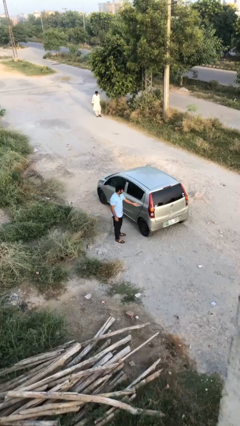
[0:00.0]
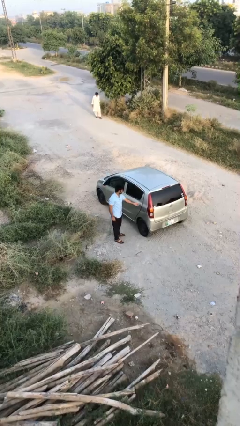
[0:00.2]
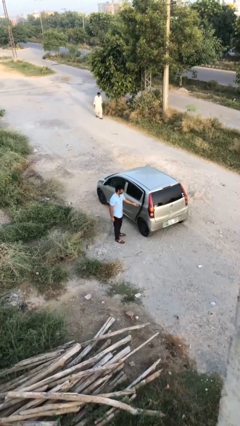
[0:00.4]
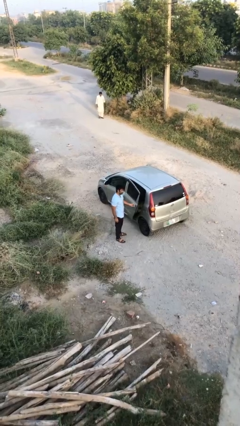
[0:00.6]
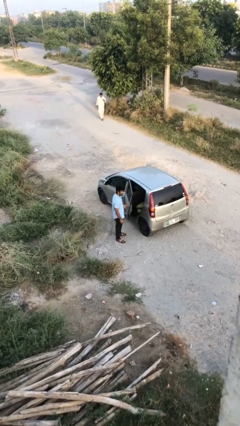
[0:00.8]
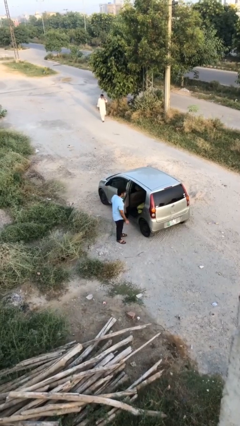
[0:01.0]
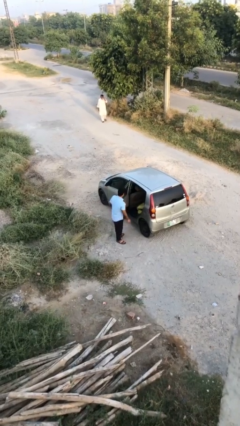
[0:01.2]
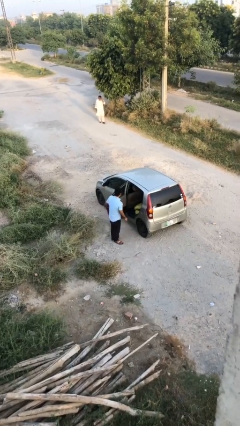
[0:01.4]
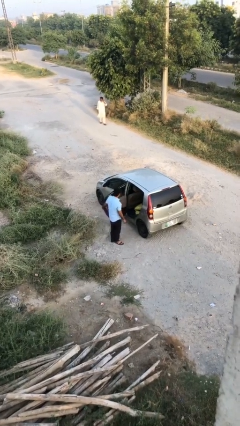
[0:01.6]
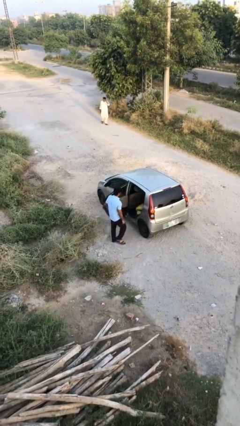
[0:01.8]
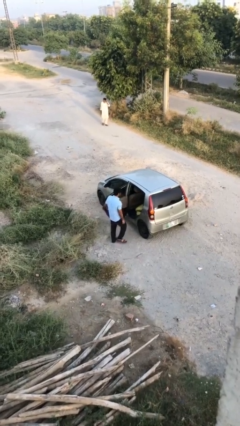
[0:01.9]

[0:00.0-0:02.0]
person opens car door

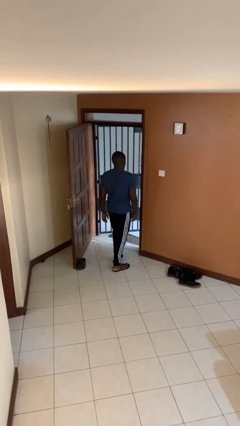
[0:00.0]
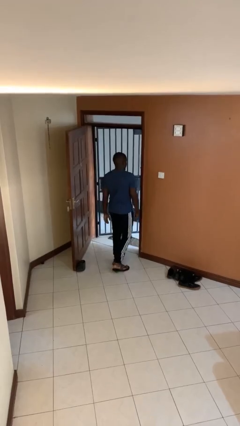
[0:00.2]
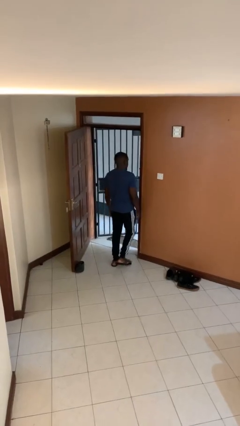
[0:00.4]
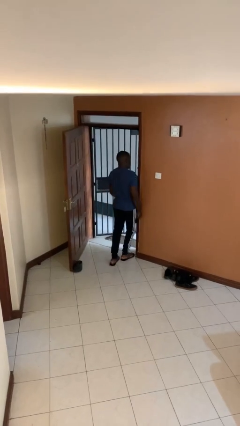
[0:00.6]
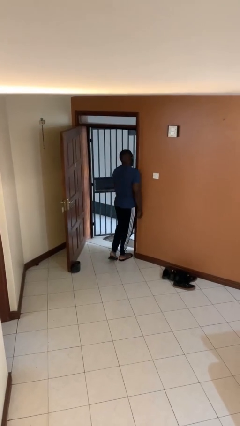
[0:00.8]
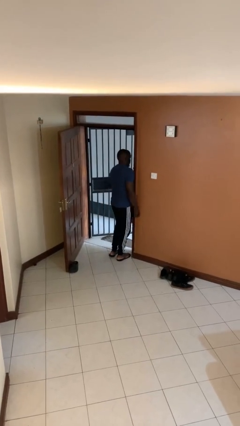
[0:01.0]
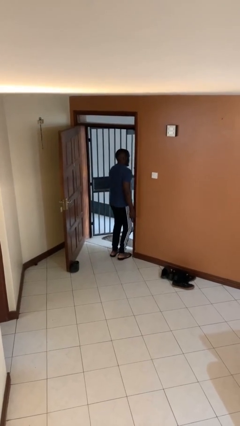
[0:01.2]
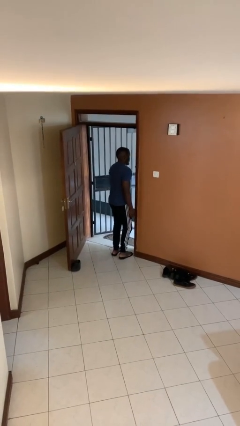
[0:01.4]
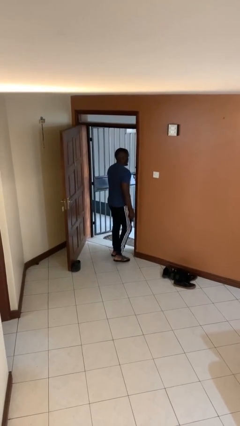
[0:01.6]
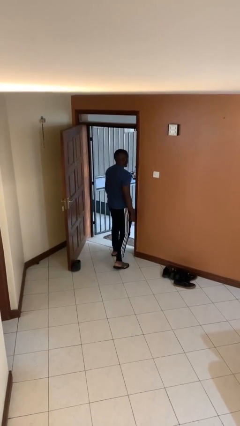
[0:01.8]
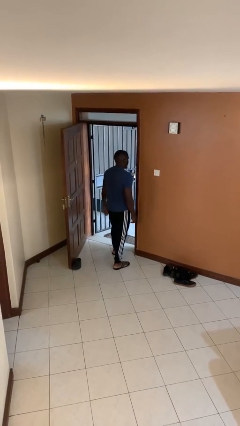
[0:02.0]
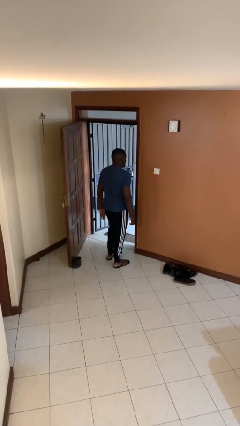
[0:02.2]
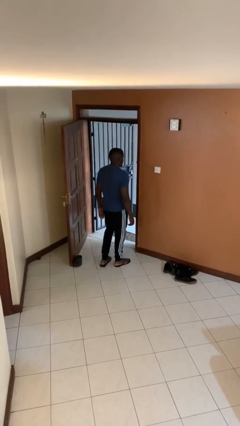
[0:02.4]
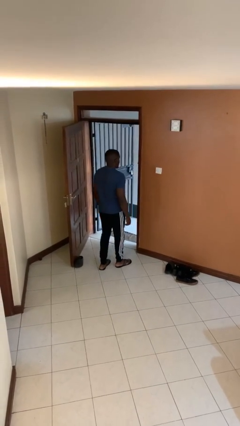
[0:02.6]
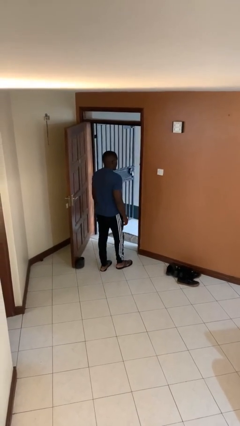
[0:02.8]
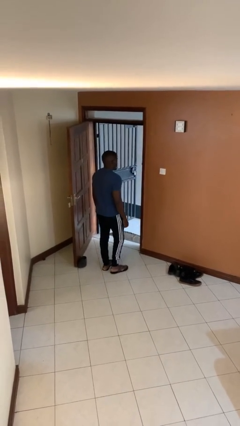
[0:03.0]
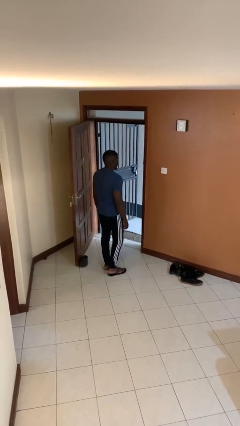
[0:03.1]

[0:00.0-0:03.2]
person bumps into wall

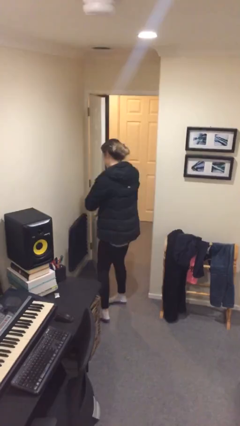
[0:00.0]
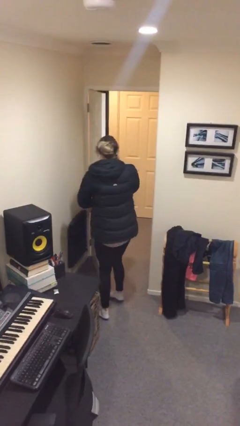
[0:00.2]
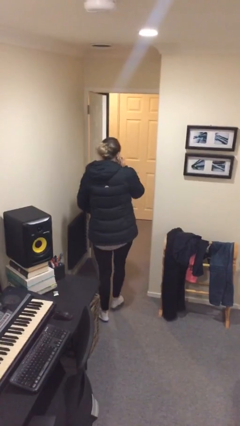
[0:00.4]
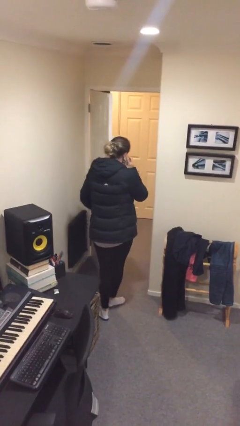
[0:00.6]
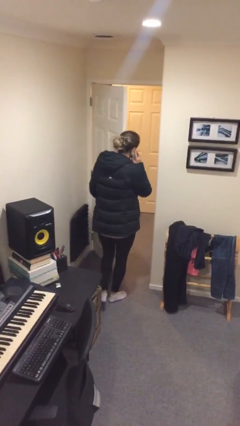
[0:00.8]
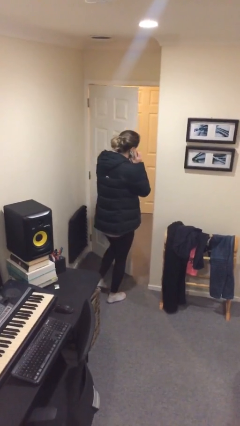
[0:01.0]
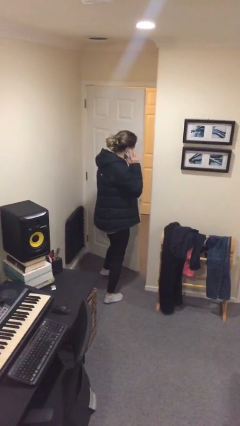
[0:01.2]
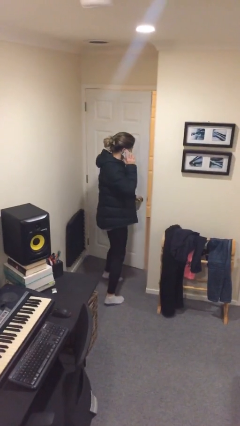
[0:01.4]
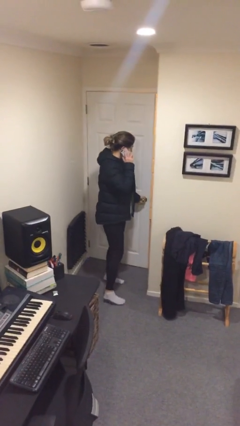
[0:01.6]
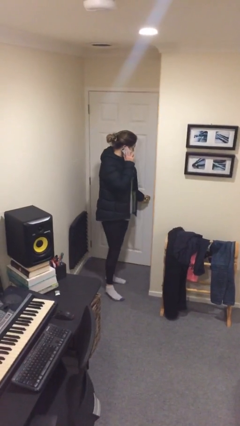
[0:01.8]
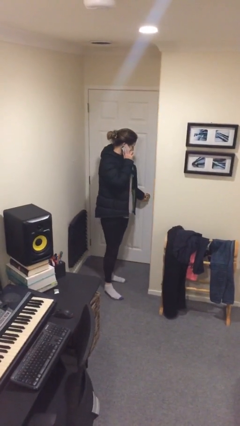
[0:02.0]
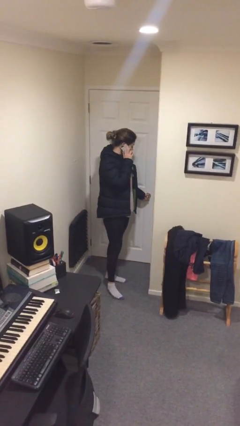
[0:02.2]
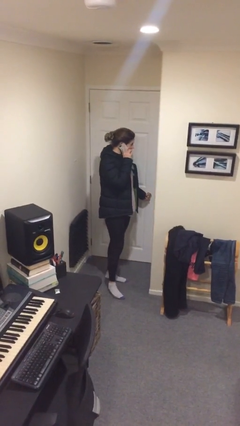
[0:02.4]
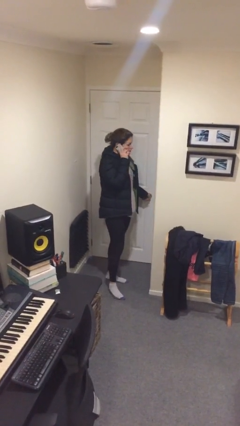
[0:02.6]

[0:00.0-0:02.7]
person closes facility door

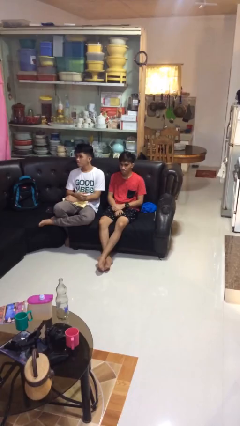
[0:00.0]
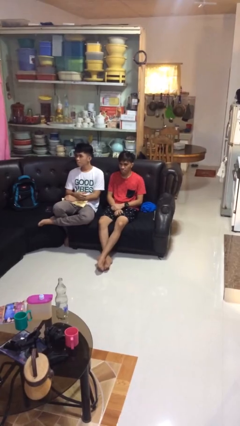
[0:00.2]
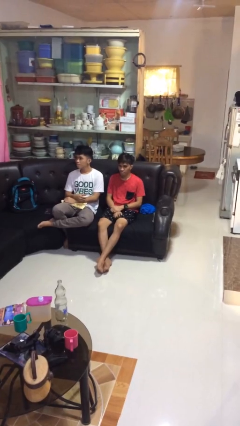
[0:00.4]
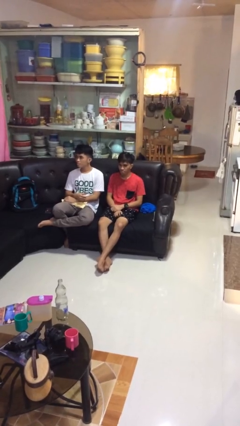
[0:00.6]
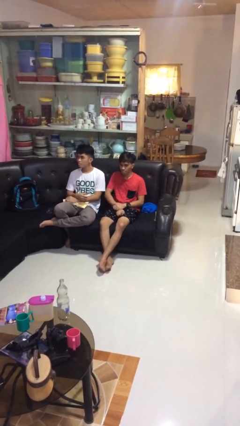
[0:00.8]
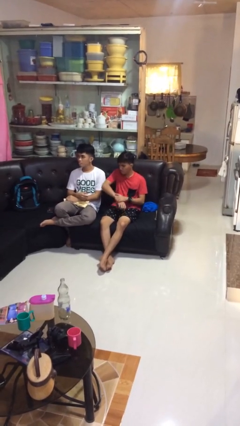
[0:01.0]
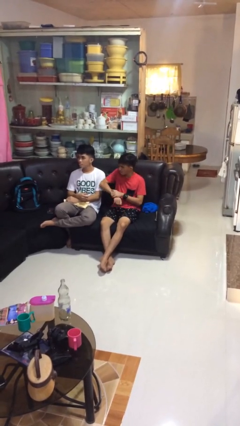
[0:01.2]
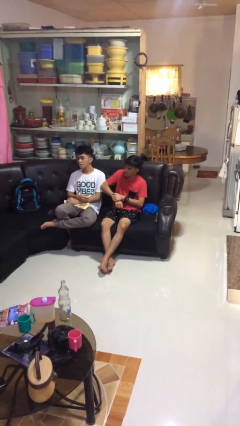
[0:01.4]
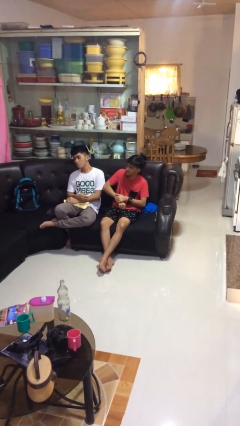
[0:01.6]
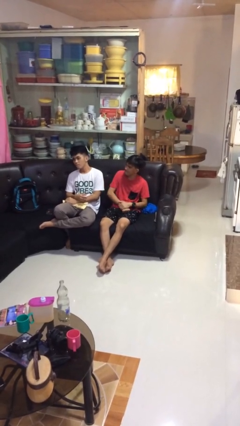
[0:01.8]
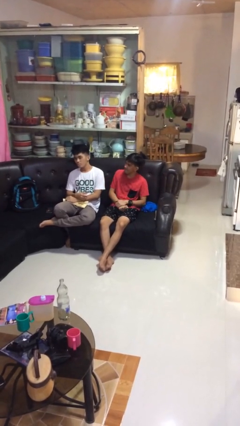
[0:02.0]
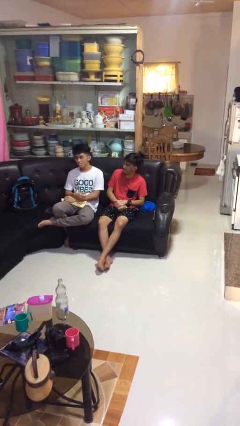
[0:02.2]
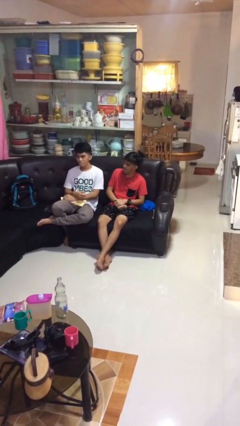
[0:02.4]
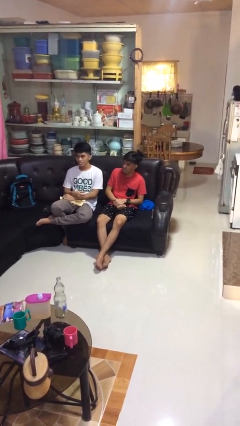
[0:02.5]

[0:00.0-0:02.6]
person nudges person with elbow

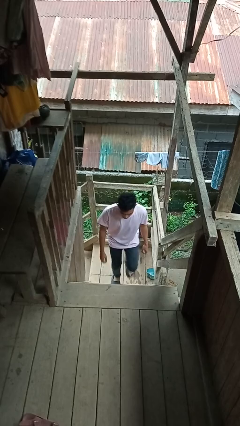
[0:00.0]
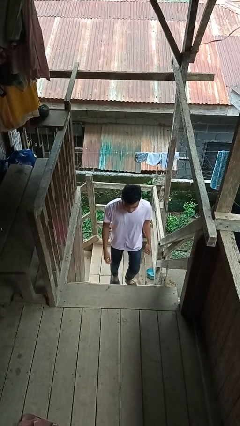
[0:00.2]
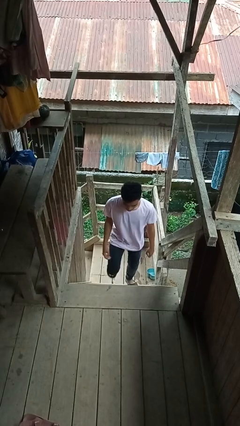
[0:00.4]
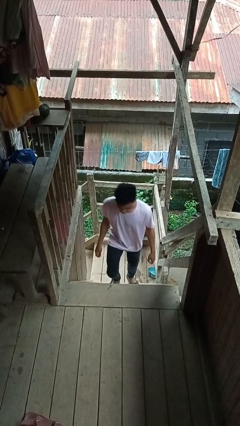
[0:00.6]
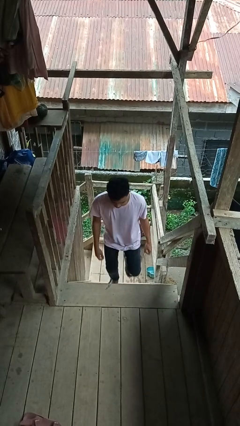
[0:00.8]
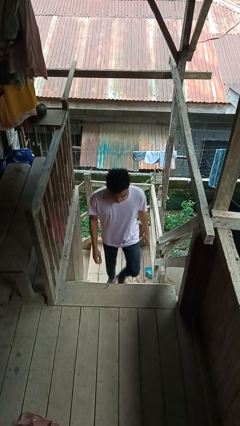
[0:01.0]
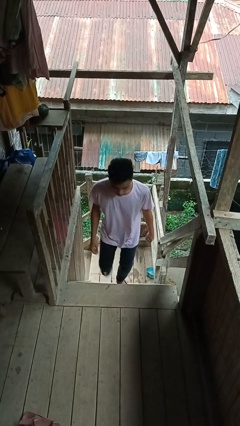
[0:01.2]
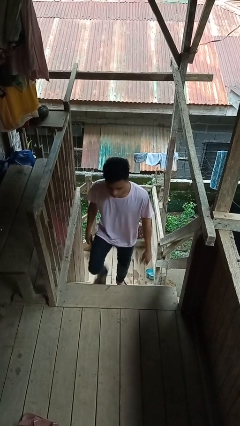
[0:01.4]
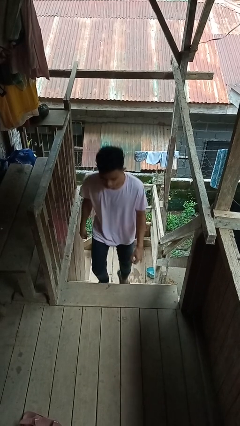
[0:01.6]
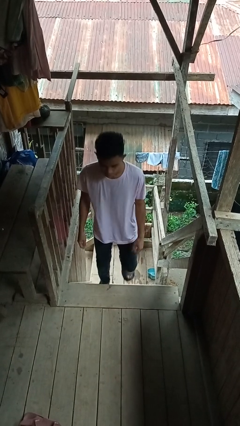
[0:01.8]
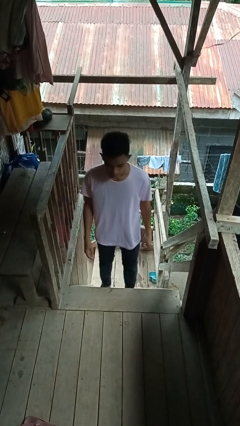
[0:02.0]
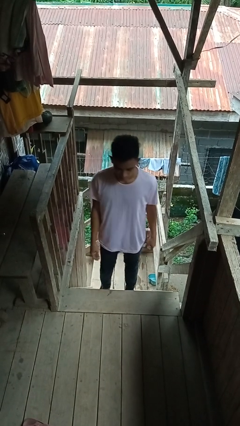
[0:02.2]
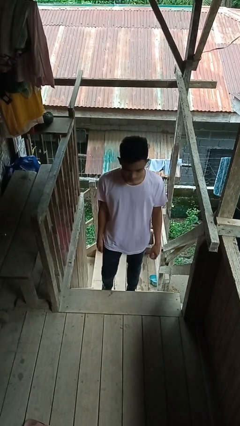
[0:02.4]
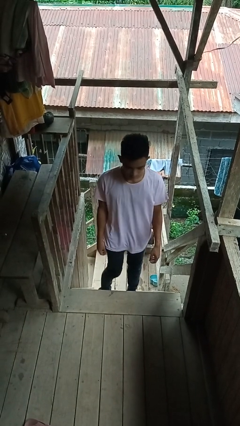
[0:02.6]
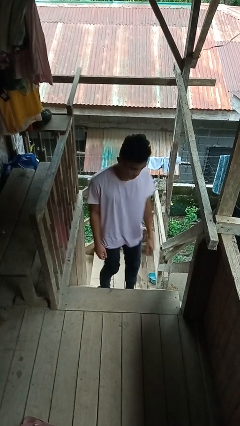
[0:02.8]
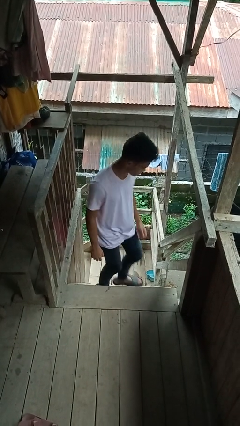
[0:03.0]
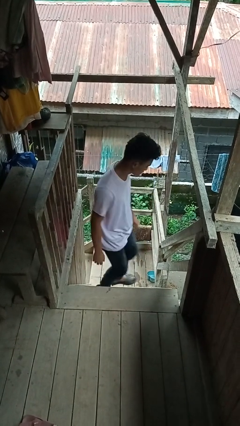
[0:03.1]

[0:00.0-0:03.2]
person climbs up stairs

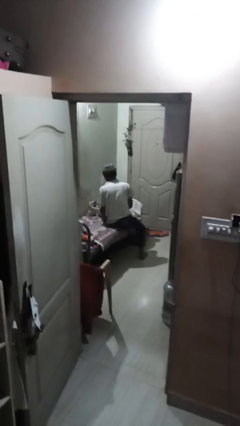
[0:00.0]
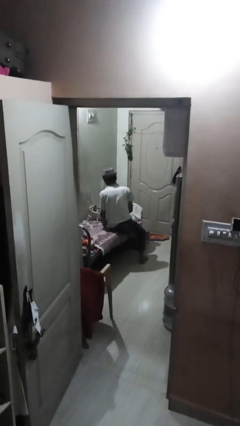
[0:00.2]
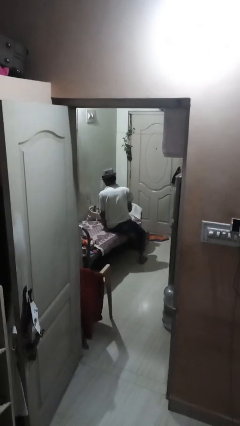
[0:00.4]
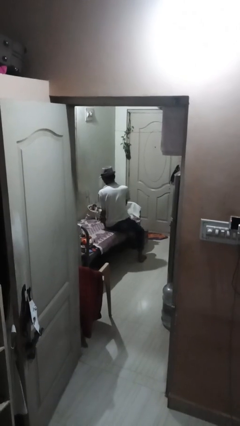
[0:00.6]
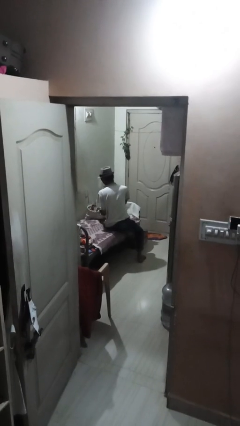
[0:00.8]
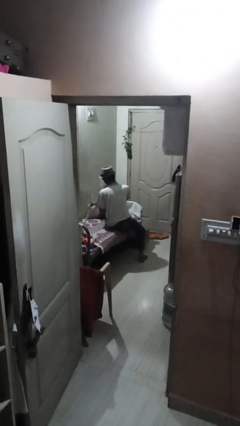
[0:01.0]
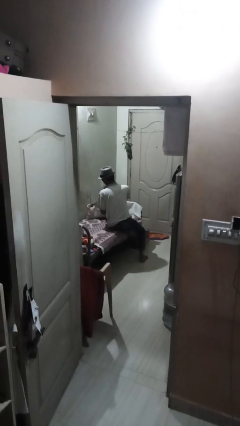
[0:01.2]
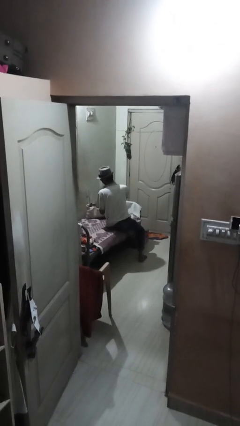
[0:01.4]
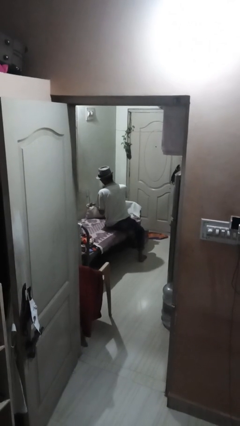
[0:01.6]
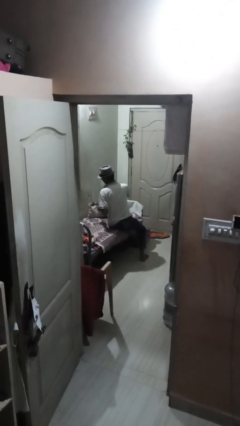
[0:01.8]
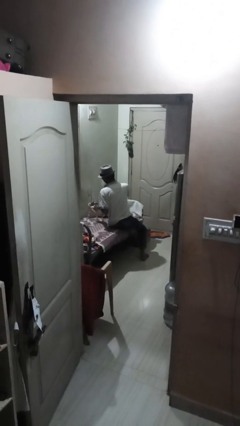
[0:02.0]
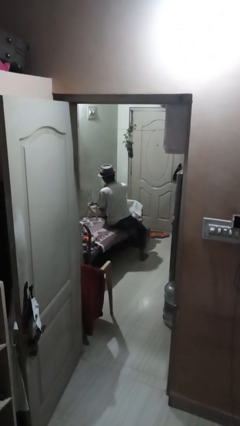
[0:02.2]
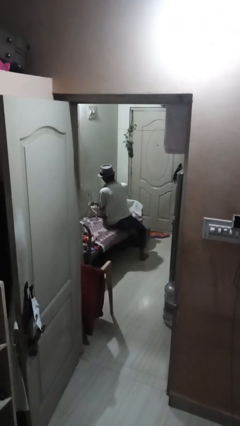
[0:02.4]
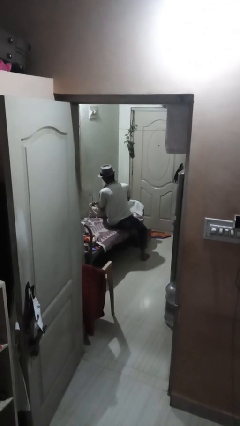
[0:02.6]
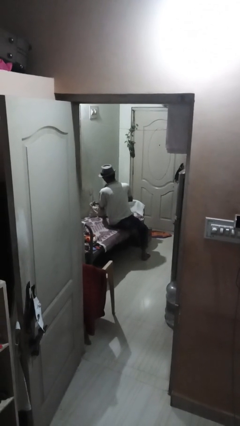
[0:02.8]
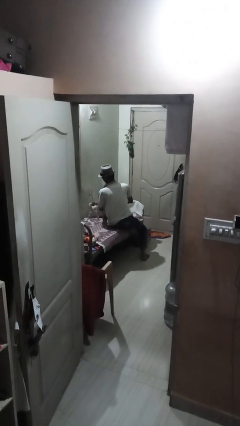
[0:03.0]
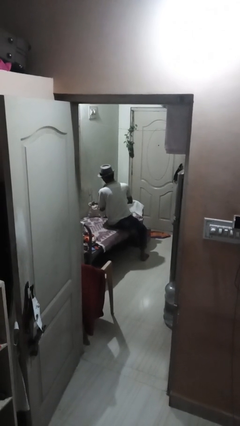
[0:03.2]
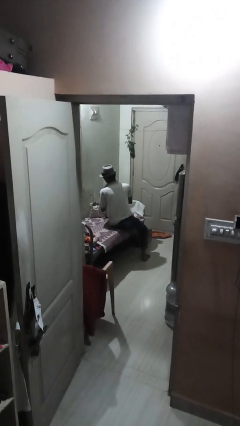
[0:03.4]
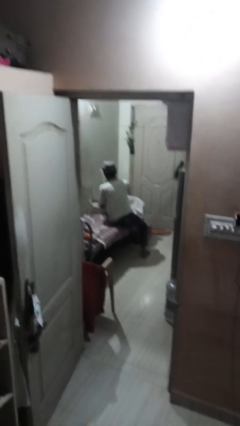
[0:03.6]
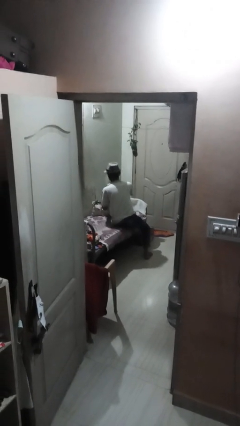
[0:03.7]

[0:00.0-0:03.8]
person searches in bag

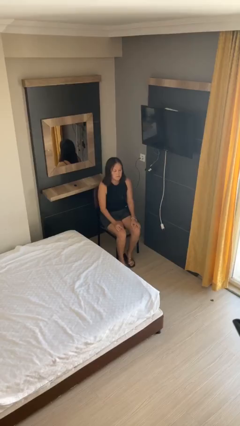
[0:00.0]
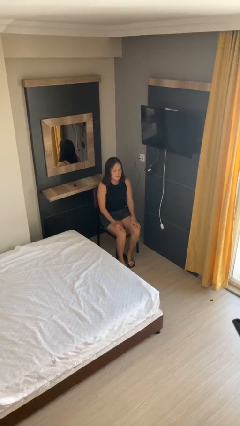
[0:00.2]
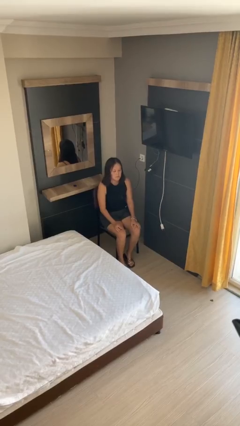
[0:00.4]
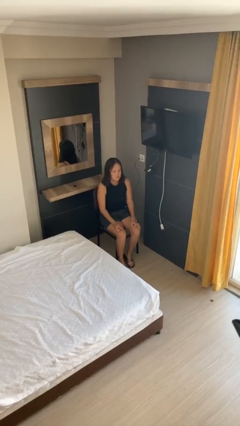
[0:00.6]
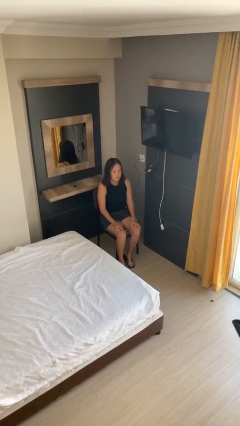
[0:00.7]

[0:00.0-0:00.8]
person sits down
